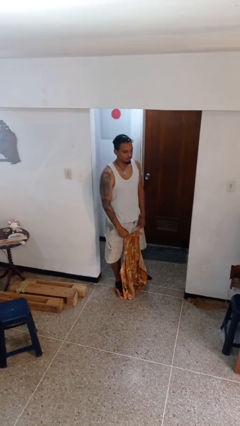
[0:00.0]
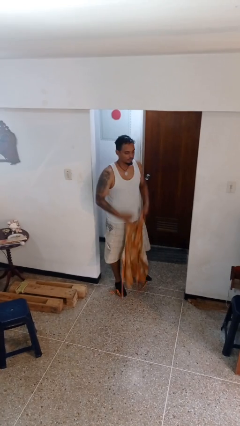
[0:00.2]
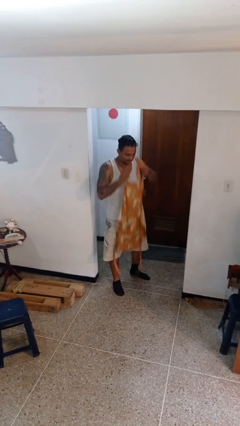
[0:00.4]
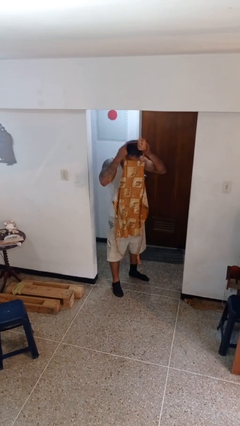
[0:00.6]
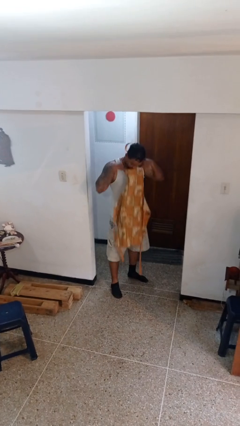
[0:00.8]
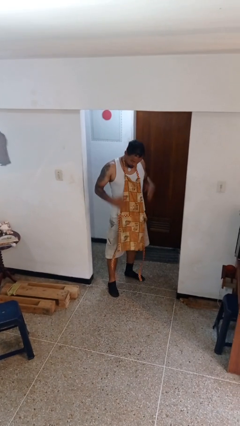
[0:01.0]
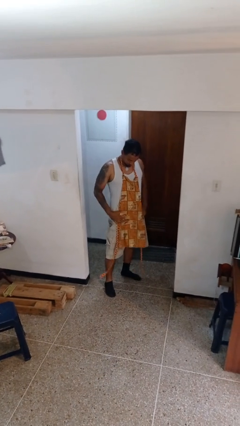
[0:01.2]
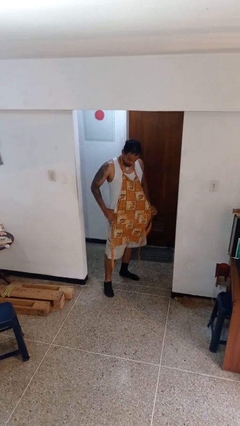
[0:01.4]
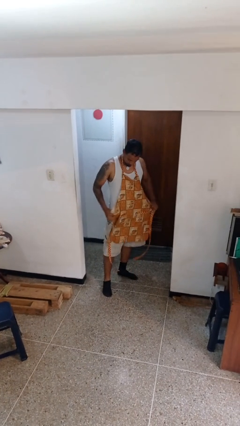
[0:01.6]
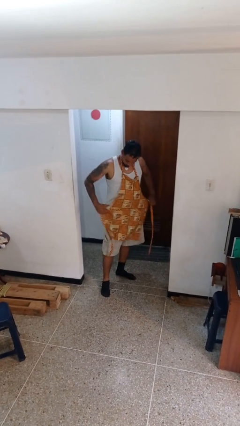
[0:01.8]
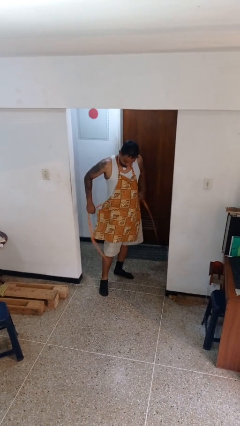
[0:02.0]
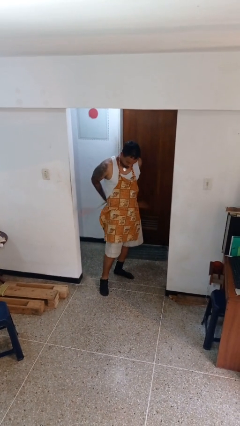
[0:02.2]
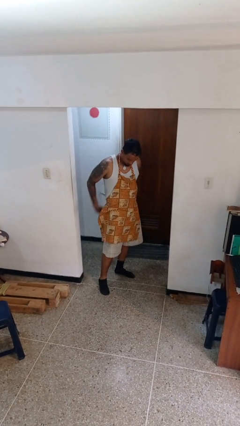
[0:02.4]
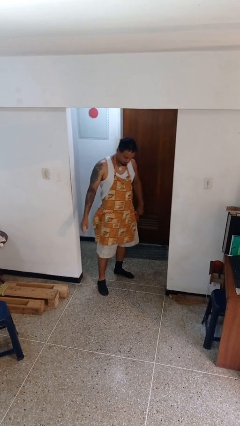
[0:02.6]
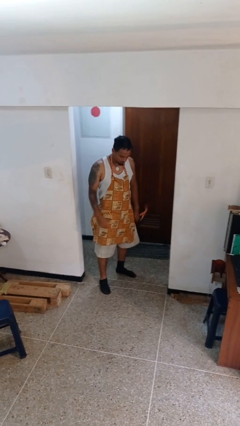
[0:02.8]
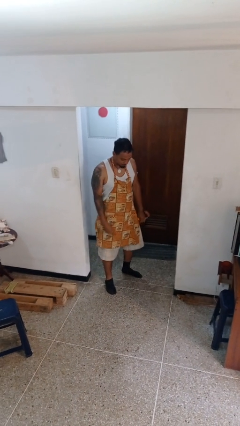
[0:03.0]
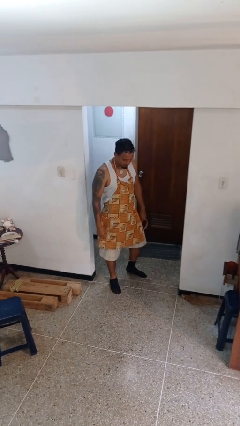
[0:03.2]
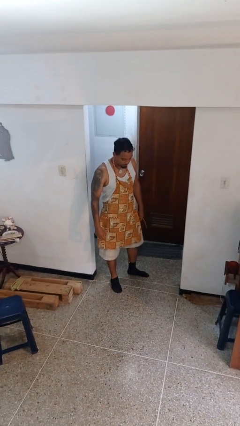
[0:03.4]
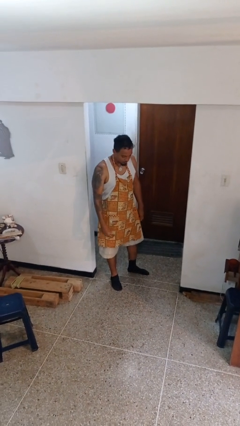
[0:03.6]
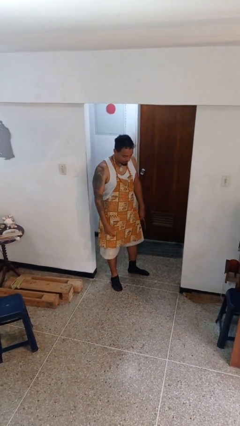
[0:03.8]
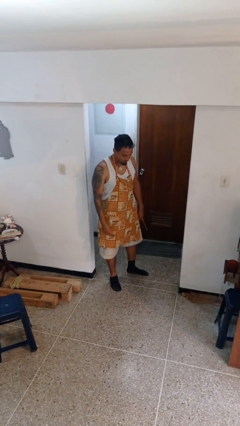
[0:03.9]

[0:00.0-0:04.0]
person puts on apron

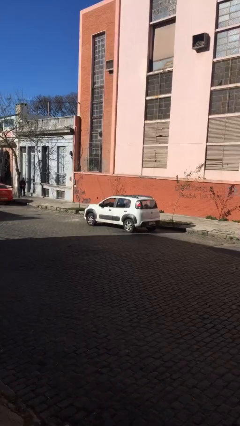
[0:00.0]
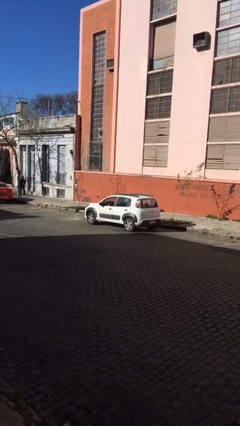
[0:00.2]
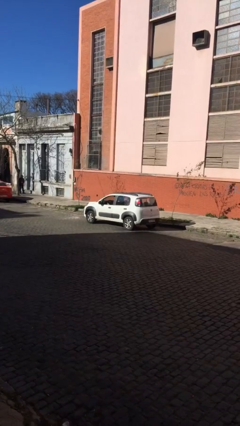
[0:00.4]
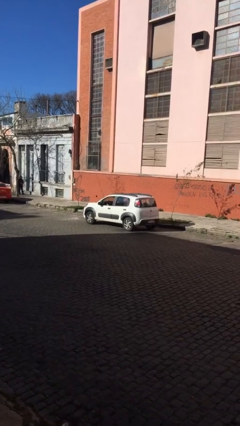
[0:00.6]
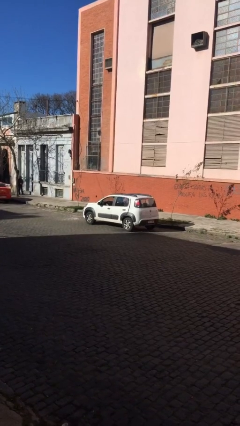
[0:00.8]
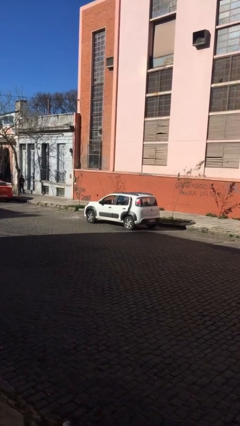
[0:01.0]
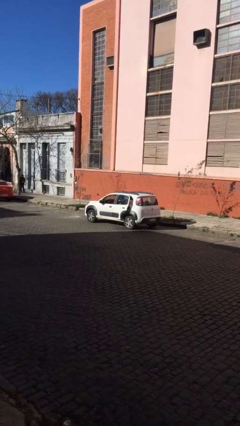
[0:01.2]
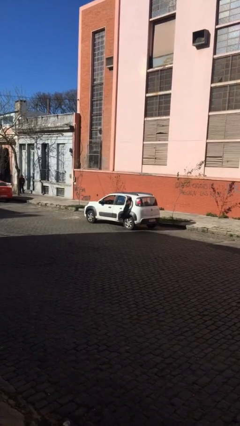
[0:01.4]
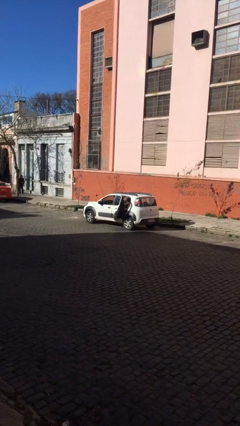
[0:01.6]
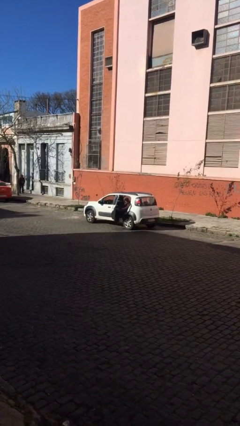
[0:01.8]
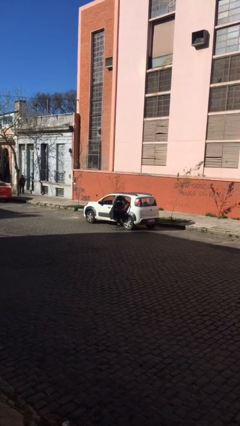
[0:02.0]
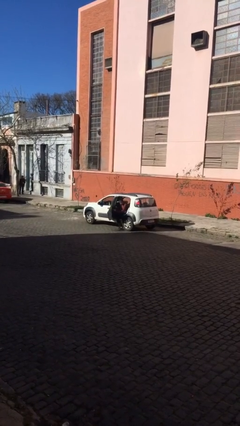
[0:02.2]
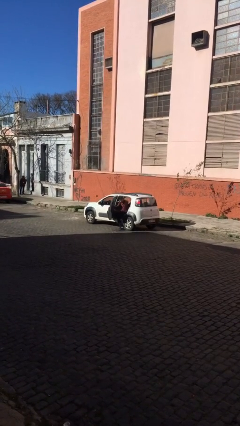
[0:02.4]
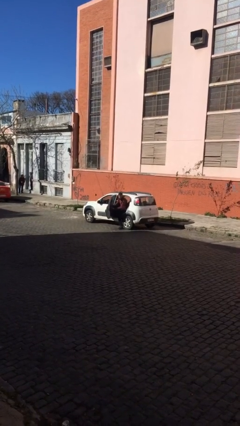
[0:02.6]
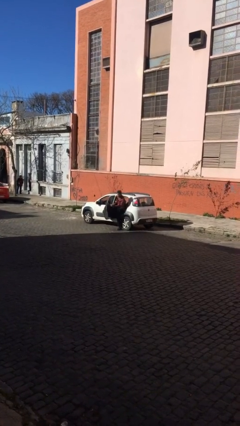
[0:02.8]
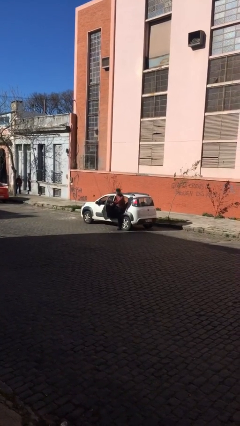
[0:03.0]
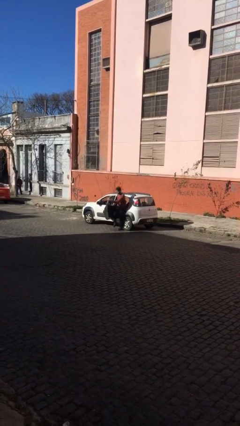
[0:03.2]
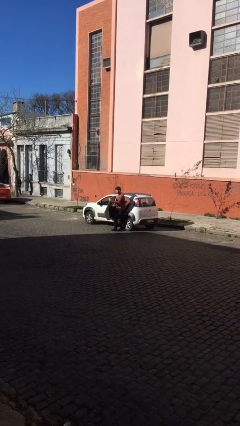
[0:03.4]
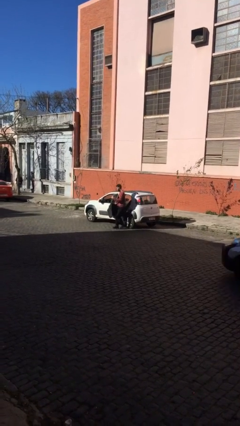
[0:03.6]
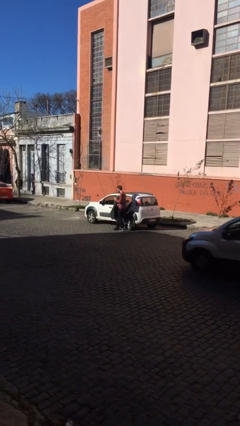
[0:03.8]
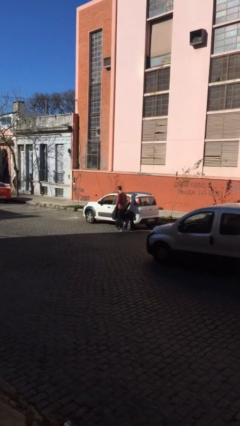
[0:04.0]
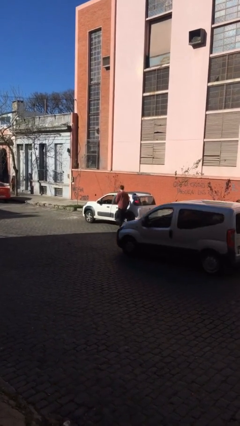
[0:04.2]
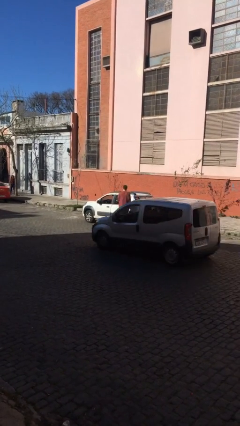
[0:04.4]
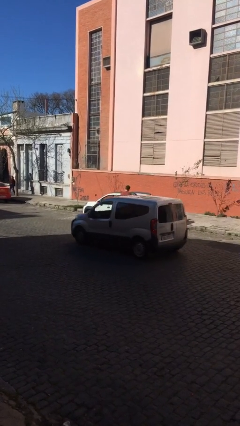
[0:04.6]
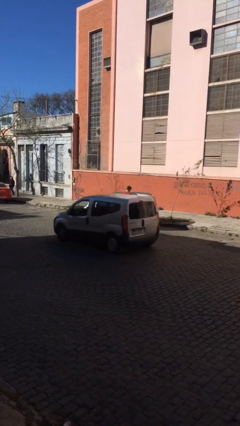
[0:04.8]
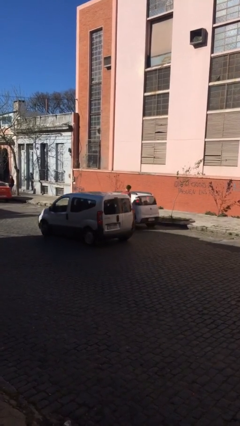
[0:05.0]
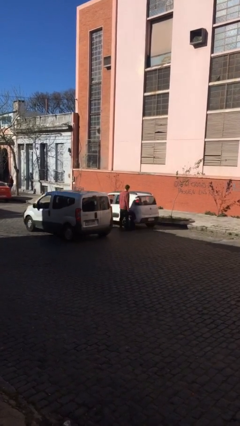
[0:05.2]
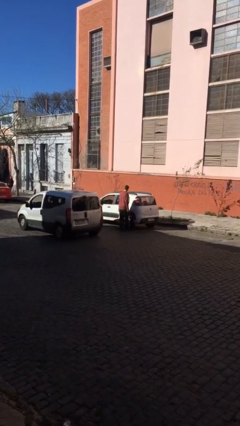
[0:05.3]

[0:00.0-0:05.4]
car drops off person

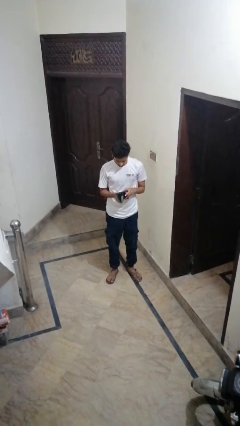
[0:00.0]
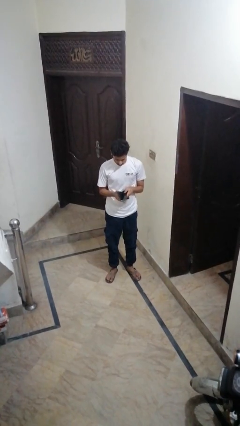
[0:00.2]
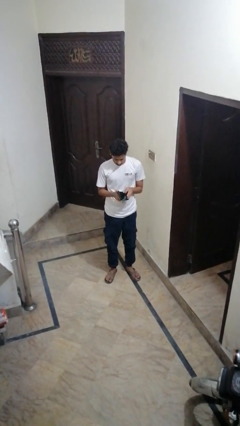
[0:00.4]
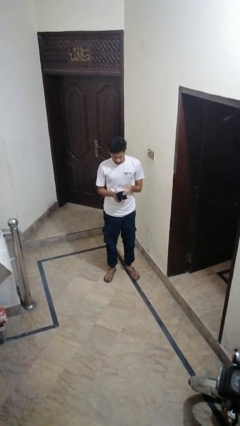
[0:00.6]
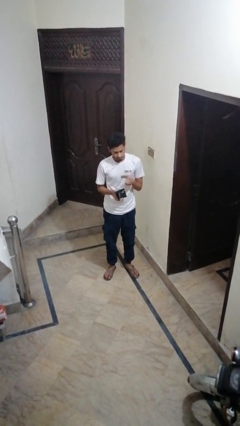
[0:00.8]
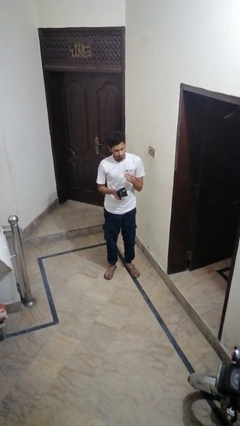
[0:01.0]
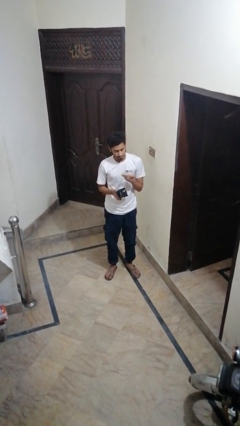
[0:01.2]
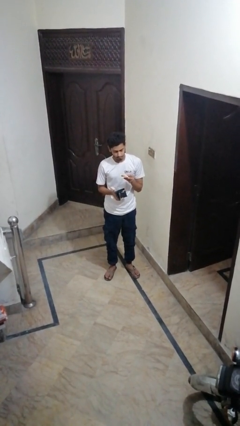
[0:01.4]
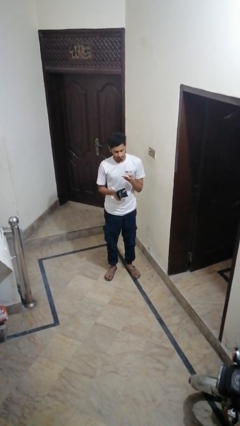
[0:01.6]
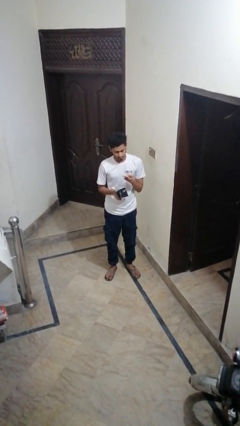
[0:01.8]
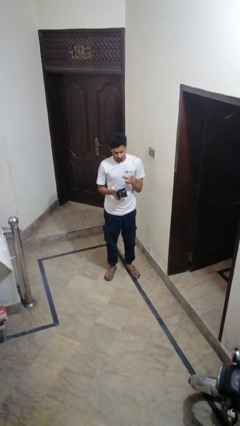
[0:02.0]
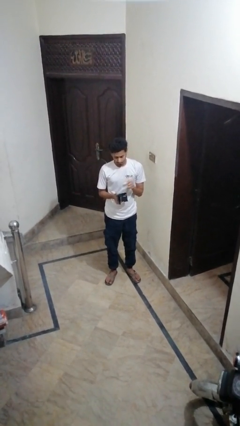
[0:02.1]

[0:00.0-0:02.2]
person takes object from purse

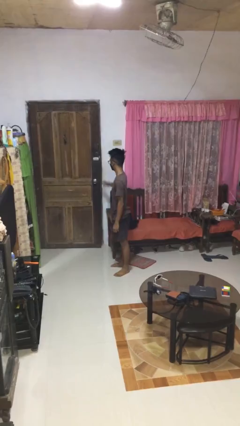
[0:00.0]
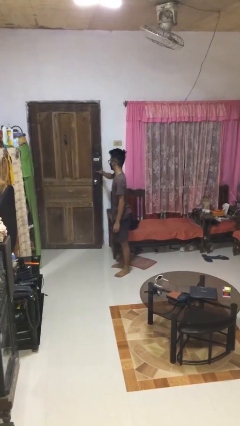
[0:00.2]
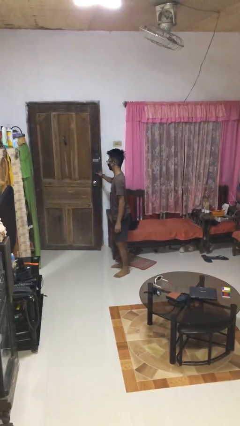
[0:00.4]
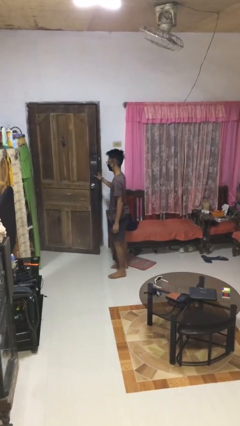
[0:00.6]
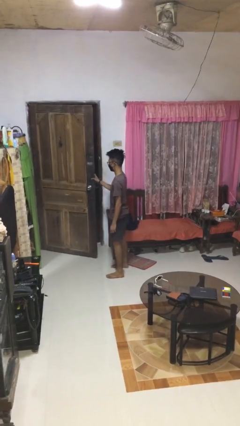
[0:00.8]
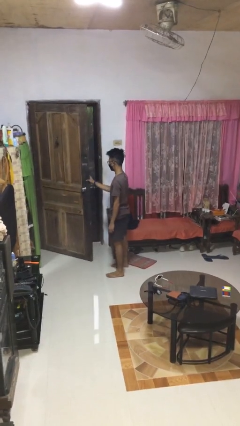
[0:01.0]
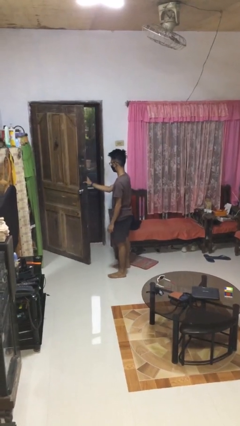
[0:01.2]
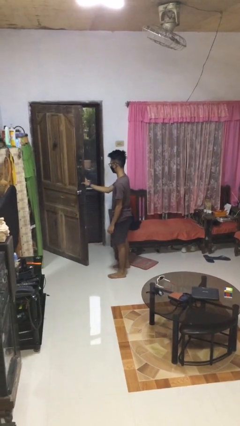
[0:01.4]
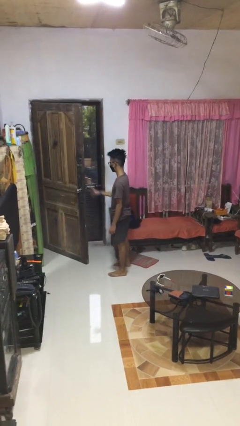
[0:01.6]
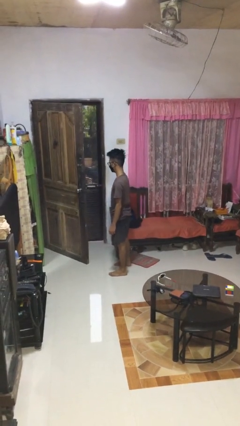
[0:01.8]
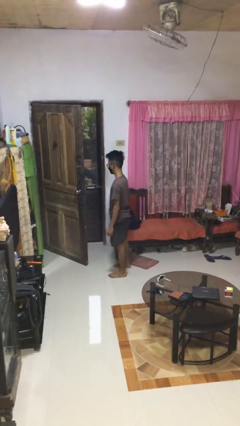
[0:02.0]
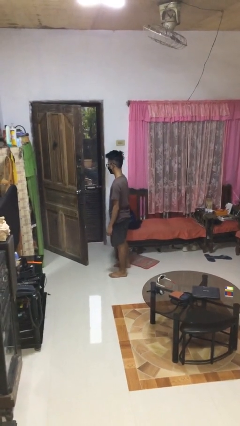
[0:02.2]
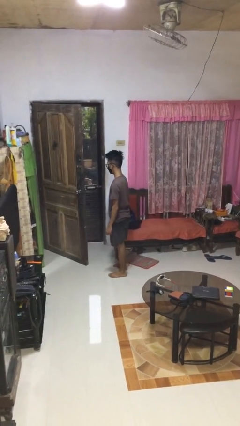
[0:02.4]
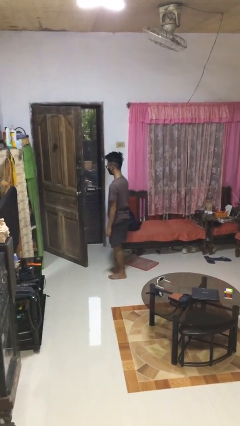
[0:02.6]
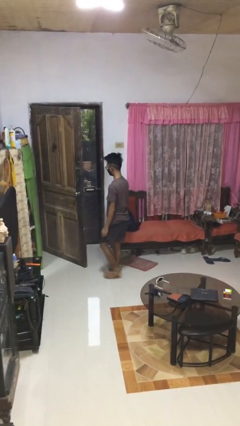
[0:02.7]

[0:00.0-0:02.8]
person opens facility door

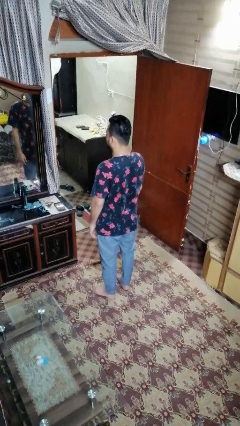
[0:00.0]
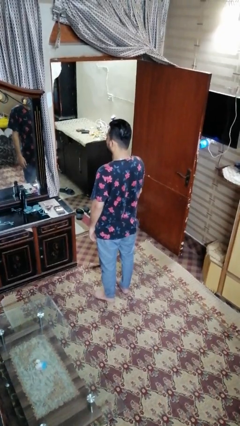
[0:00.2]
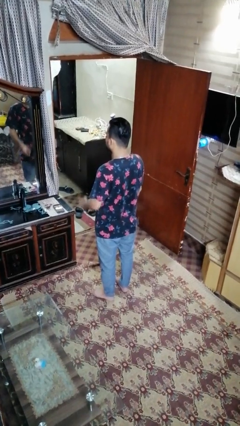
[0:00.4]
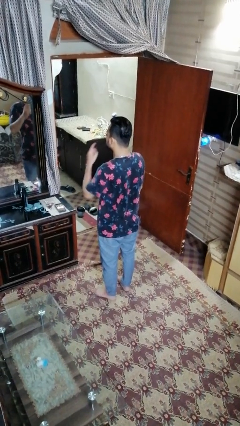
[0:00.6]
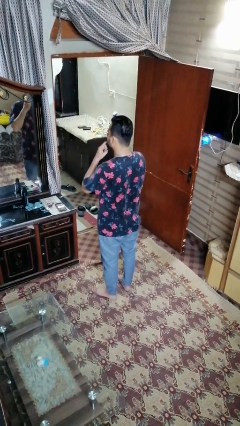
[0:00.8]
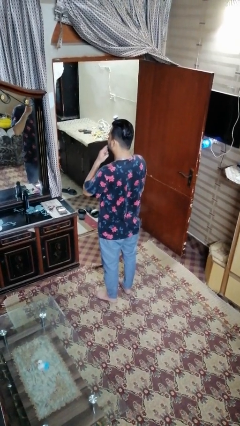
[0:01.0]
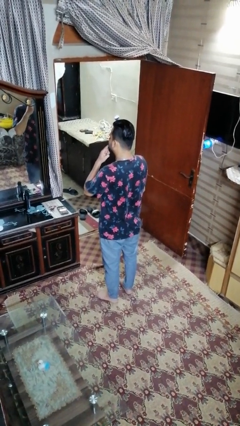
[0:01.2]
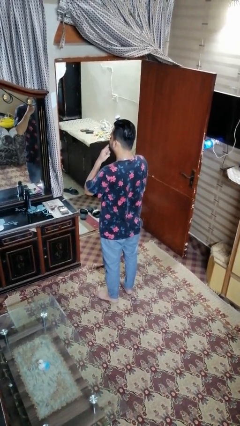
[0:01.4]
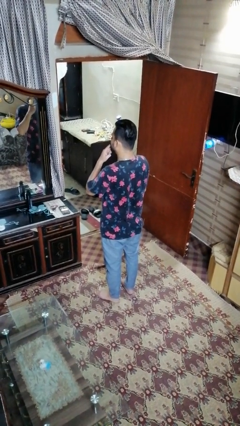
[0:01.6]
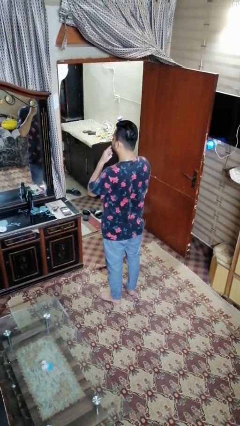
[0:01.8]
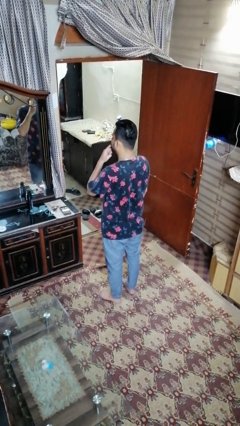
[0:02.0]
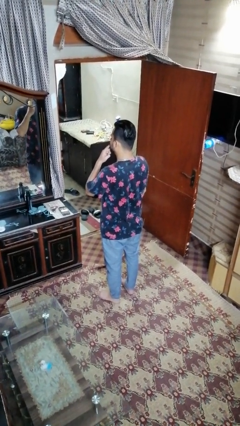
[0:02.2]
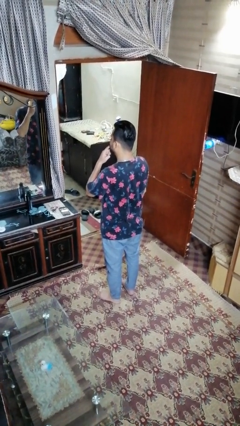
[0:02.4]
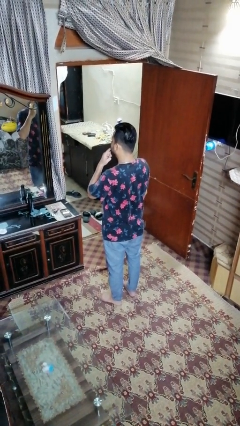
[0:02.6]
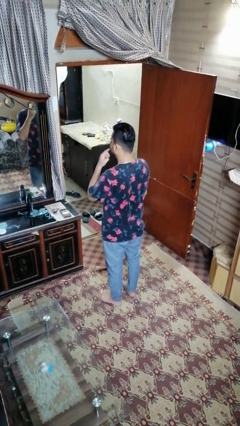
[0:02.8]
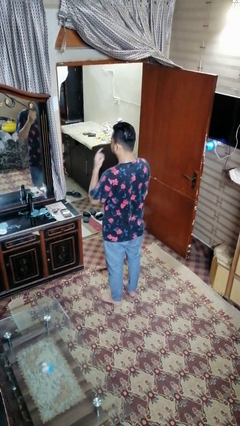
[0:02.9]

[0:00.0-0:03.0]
person licks fingers

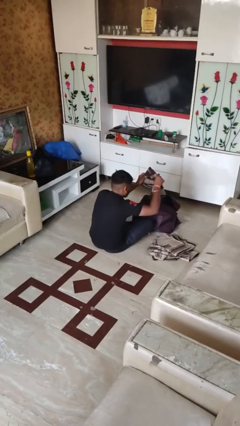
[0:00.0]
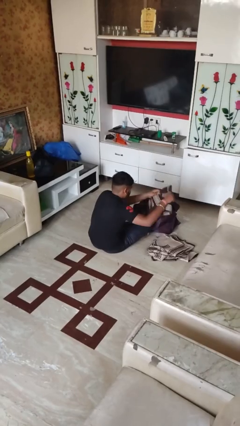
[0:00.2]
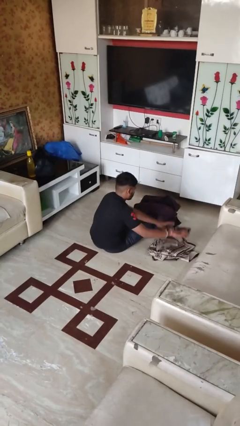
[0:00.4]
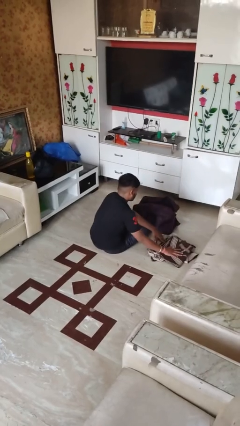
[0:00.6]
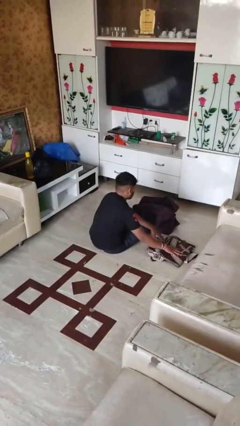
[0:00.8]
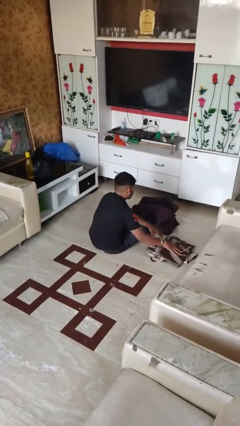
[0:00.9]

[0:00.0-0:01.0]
person unloads clothes from suitcase
